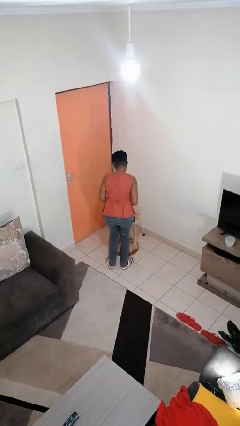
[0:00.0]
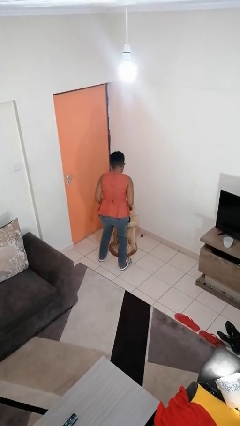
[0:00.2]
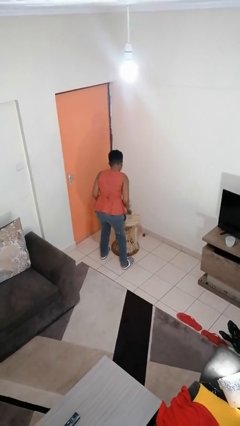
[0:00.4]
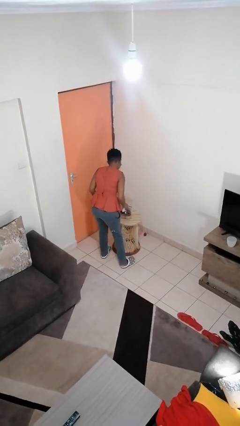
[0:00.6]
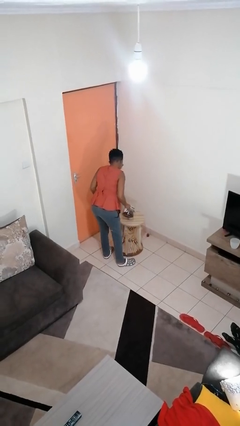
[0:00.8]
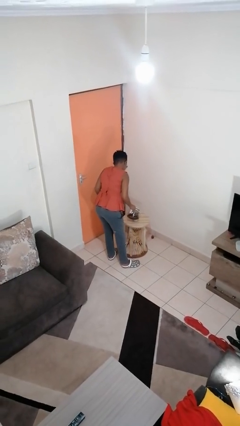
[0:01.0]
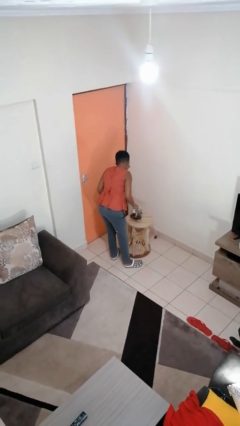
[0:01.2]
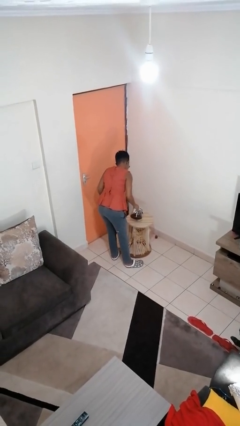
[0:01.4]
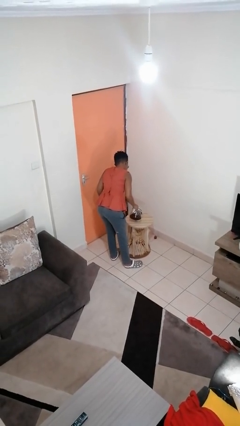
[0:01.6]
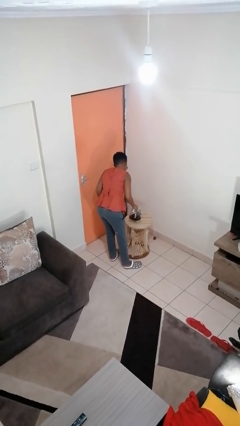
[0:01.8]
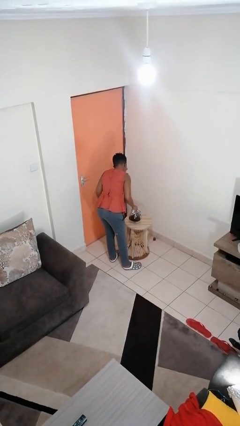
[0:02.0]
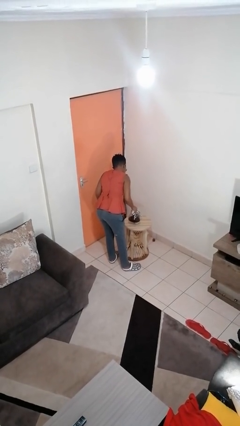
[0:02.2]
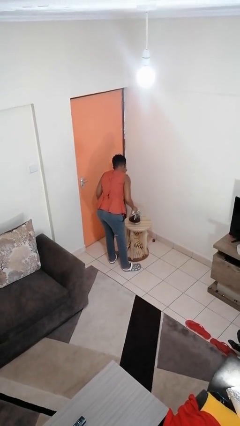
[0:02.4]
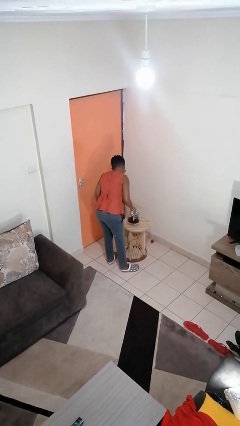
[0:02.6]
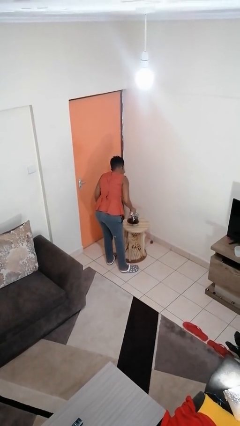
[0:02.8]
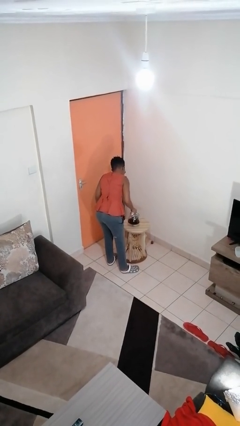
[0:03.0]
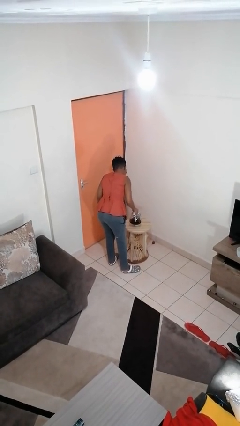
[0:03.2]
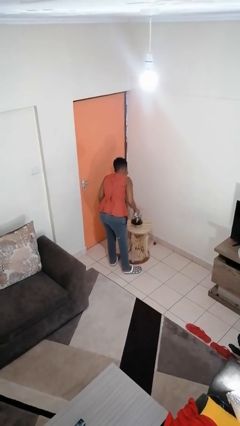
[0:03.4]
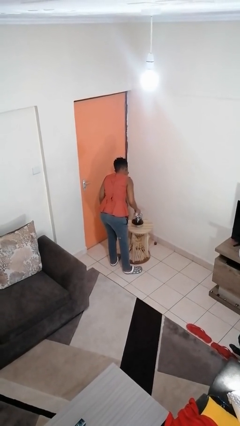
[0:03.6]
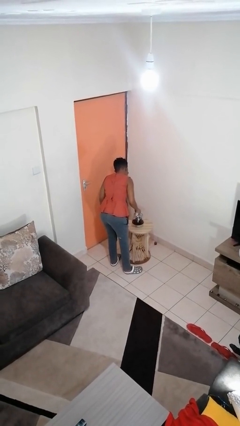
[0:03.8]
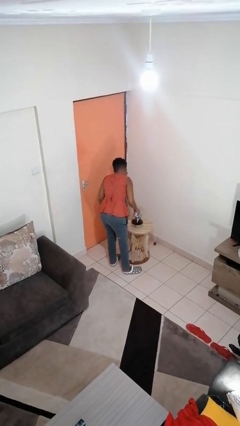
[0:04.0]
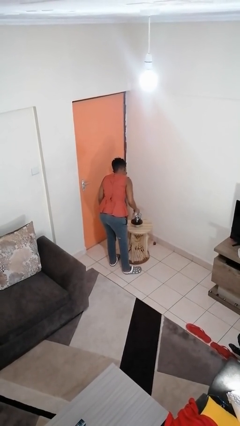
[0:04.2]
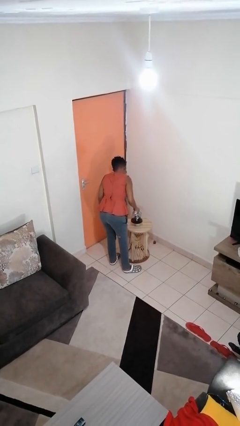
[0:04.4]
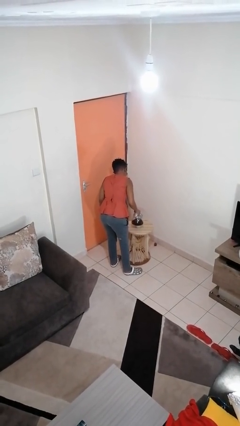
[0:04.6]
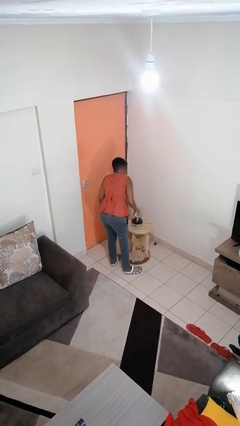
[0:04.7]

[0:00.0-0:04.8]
person pours coffee into mug

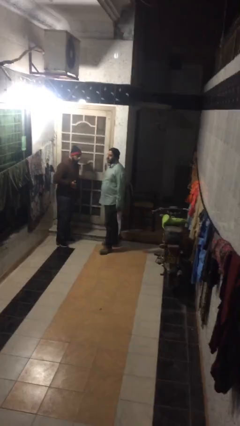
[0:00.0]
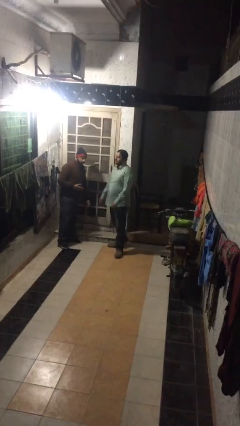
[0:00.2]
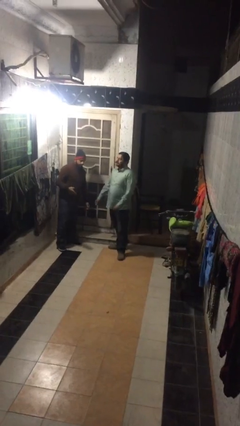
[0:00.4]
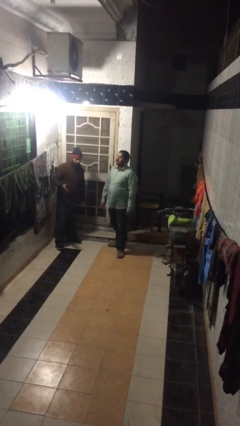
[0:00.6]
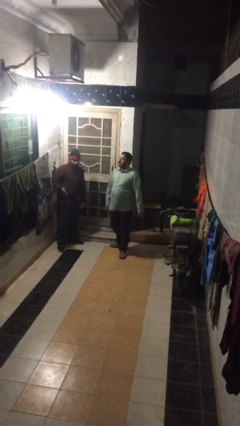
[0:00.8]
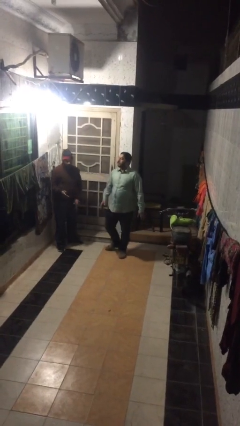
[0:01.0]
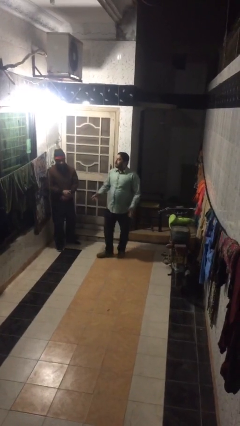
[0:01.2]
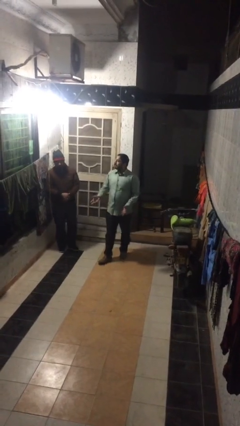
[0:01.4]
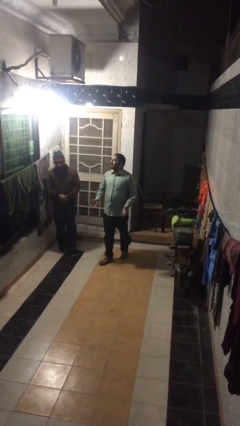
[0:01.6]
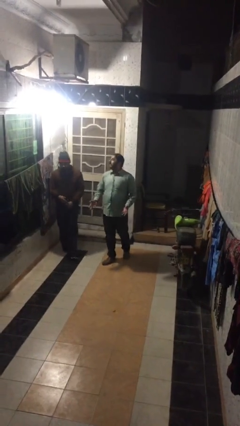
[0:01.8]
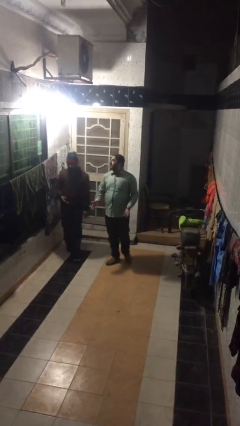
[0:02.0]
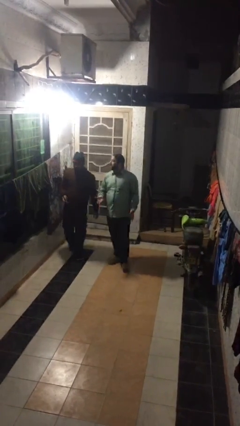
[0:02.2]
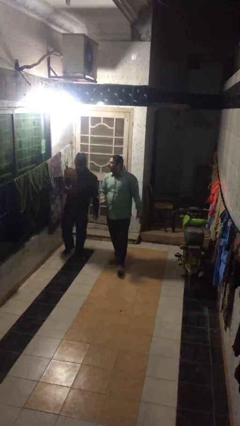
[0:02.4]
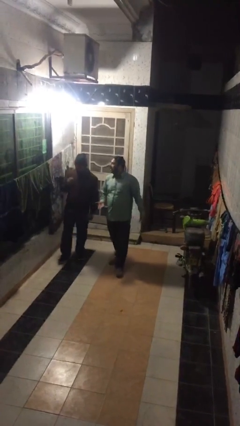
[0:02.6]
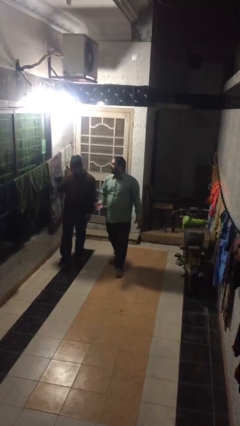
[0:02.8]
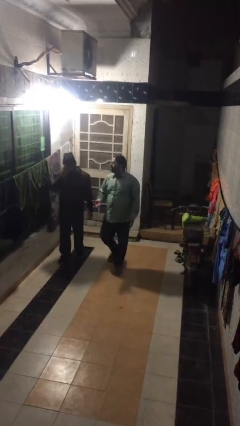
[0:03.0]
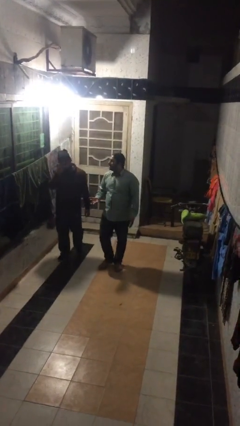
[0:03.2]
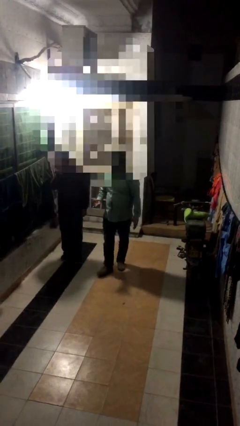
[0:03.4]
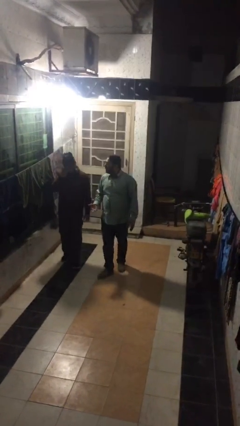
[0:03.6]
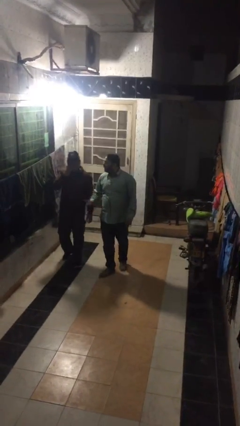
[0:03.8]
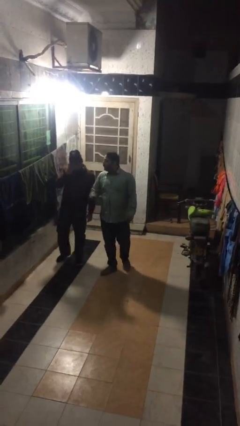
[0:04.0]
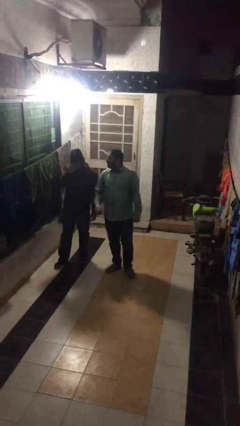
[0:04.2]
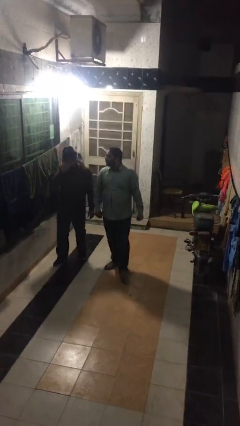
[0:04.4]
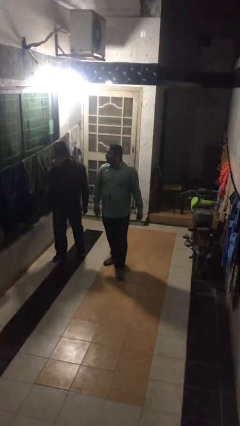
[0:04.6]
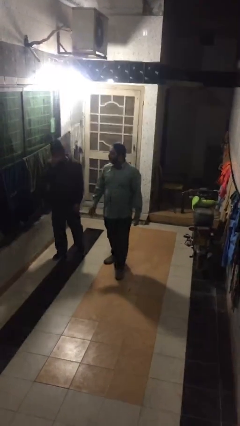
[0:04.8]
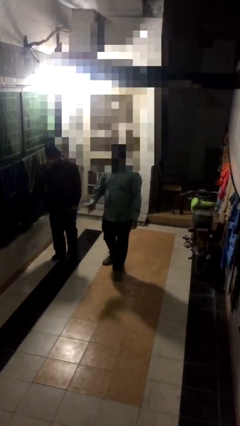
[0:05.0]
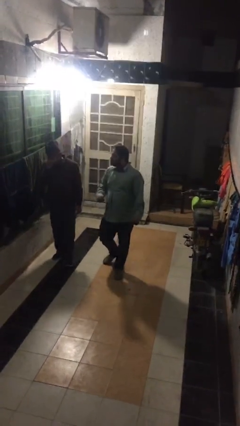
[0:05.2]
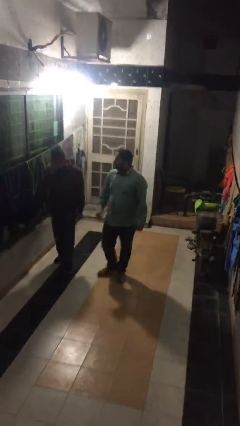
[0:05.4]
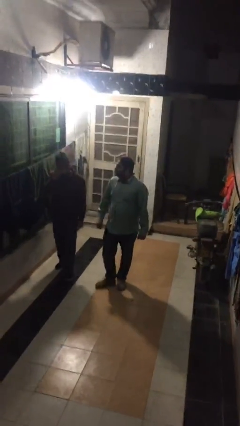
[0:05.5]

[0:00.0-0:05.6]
person talks to person

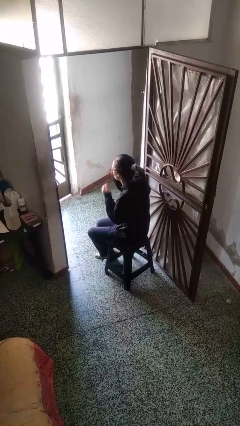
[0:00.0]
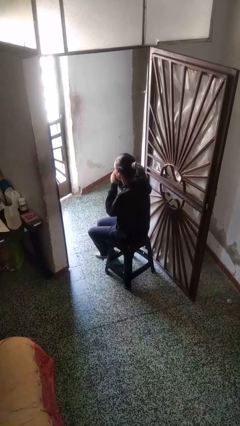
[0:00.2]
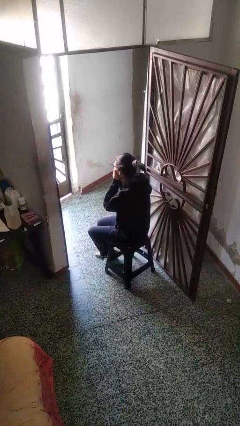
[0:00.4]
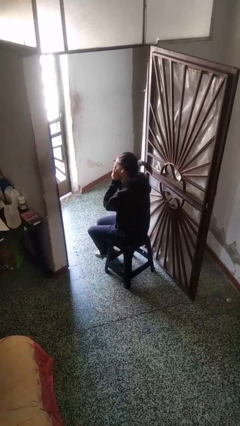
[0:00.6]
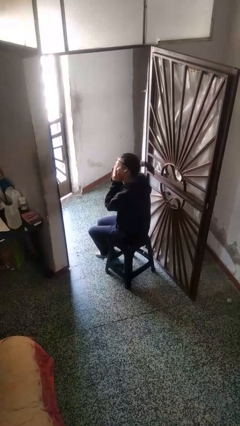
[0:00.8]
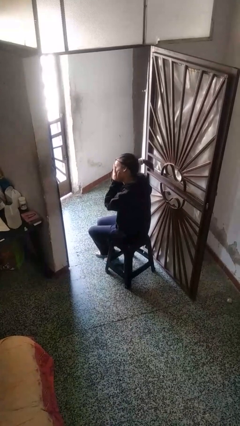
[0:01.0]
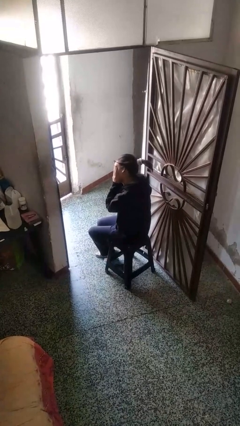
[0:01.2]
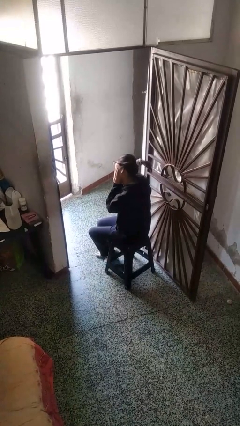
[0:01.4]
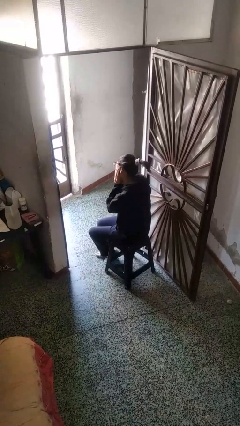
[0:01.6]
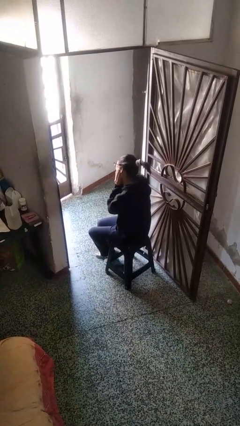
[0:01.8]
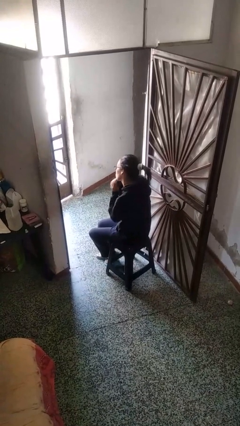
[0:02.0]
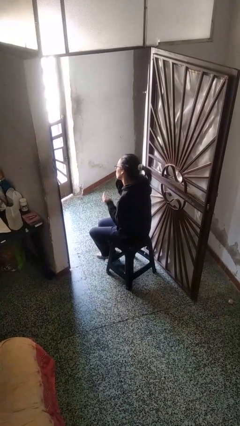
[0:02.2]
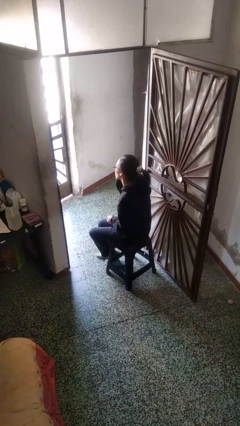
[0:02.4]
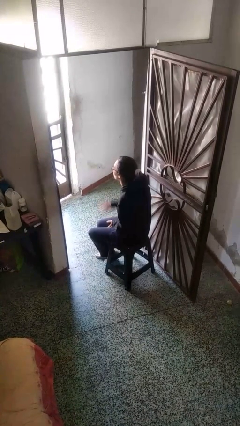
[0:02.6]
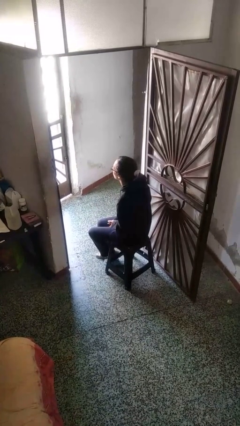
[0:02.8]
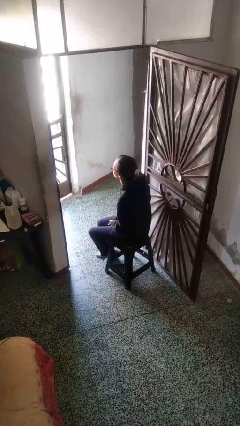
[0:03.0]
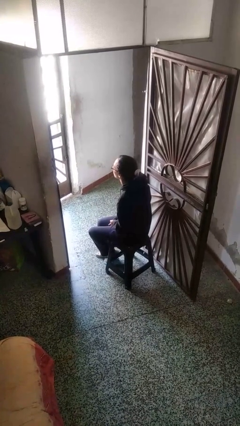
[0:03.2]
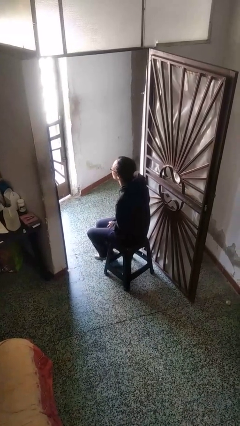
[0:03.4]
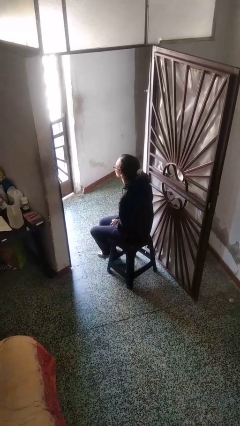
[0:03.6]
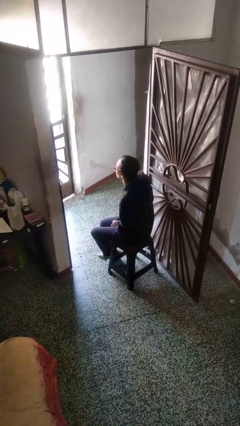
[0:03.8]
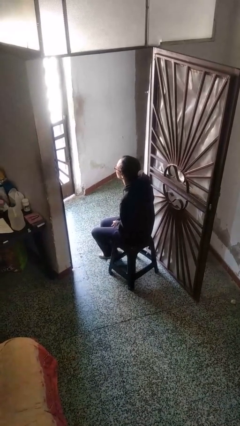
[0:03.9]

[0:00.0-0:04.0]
person rubs eyes

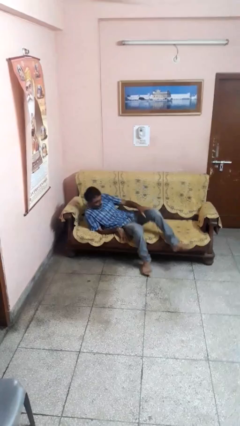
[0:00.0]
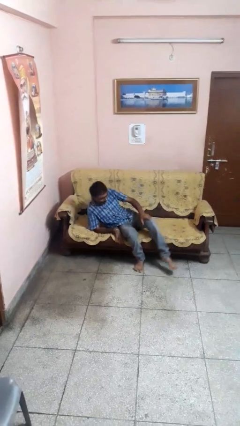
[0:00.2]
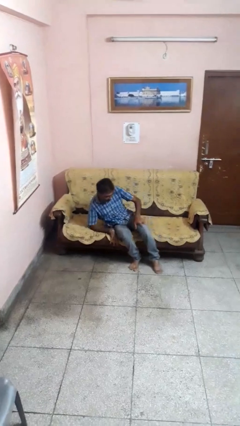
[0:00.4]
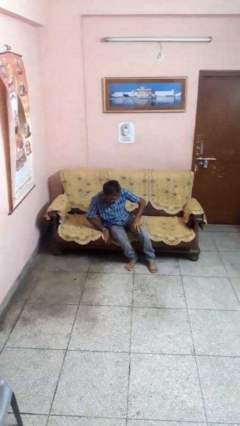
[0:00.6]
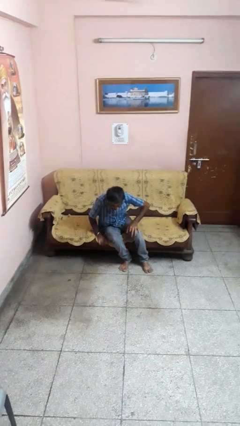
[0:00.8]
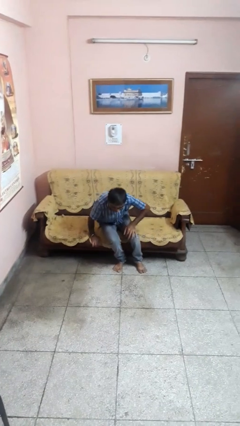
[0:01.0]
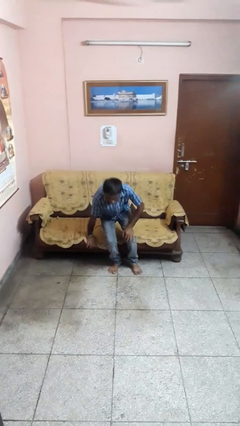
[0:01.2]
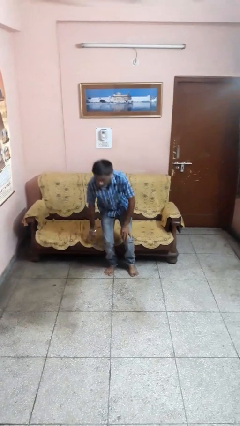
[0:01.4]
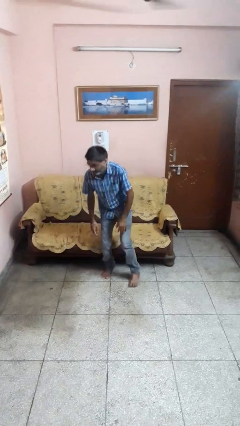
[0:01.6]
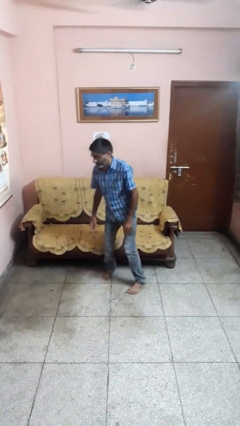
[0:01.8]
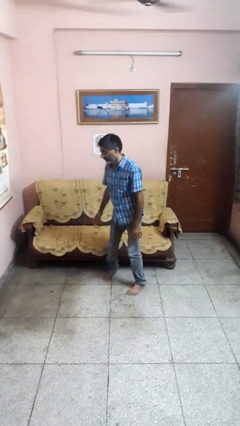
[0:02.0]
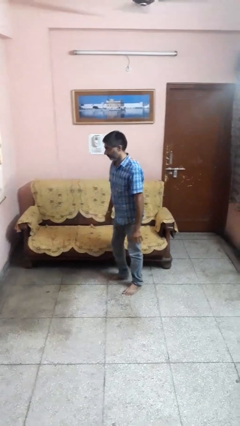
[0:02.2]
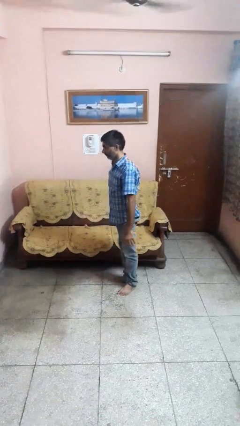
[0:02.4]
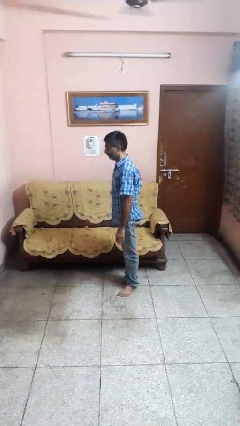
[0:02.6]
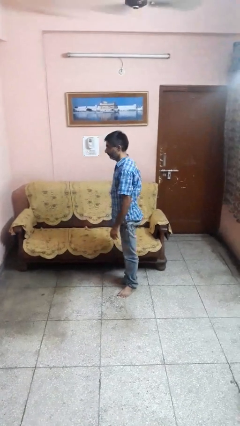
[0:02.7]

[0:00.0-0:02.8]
person stands up

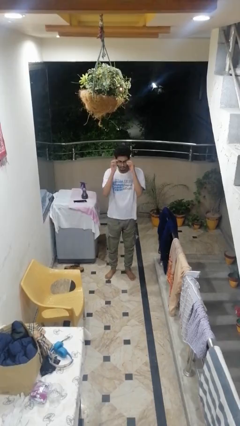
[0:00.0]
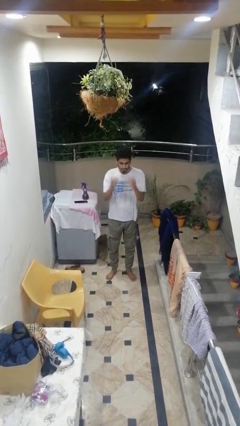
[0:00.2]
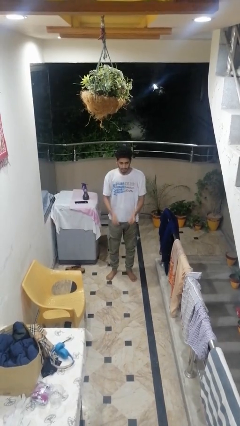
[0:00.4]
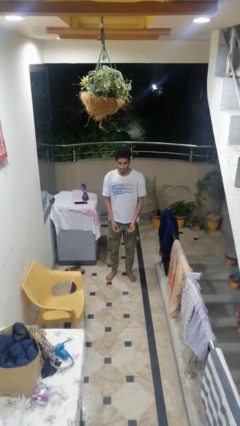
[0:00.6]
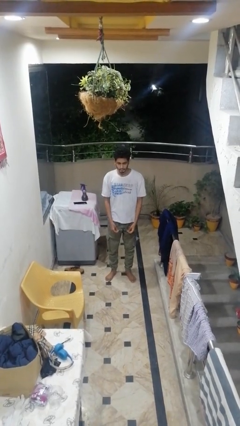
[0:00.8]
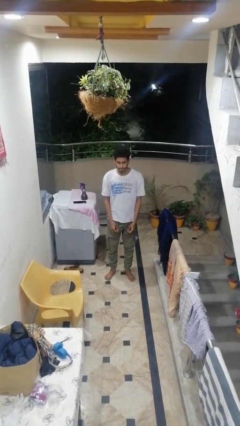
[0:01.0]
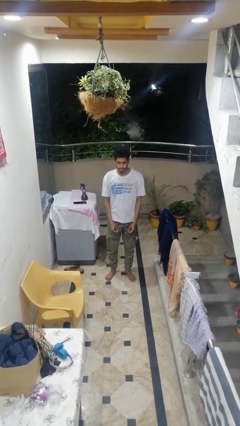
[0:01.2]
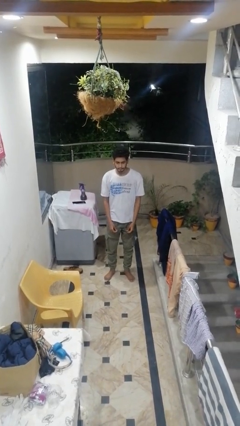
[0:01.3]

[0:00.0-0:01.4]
person takes off glasses
